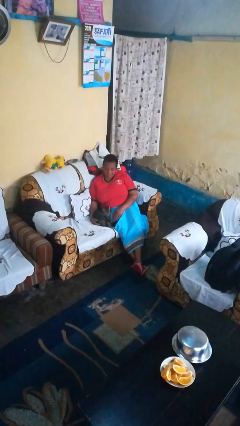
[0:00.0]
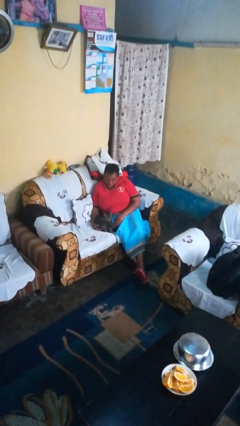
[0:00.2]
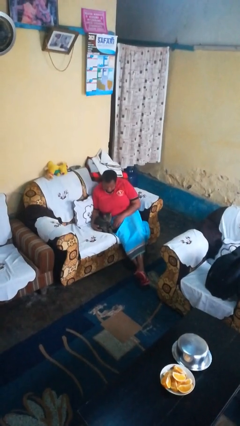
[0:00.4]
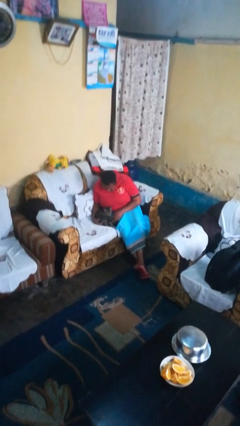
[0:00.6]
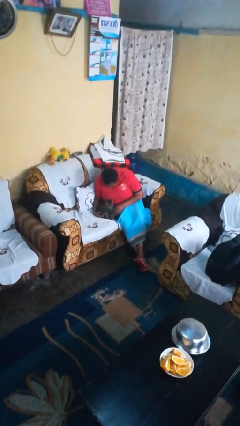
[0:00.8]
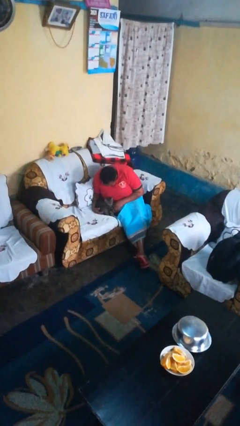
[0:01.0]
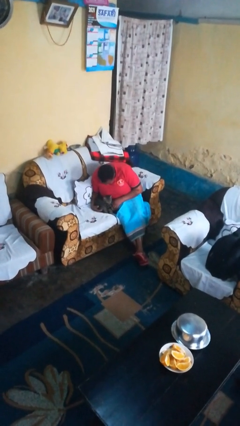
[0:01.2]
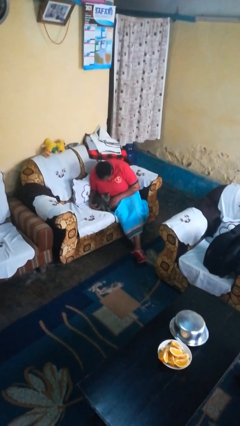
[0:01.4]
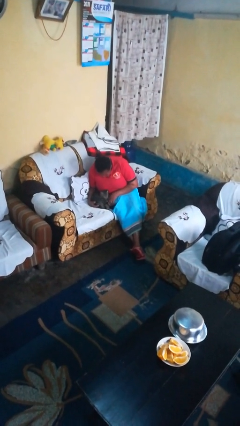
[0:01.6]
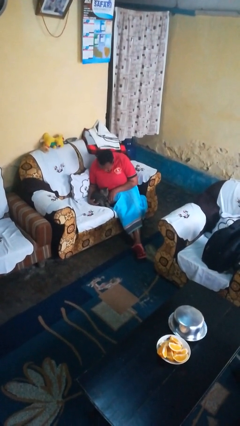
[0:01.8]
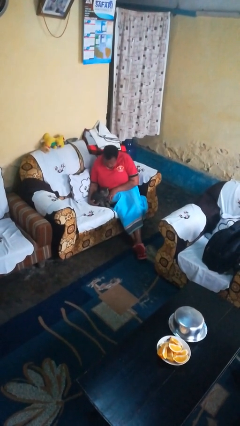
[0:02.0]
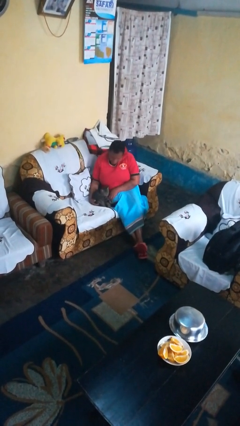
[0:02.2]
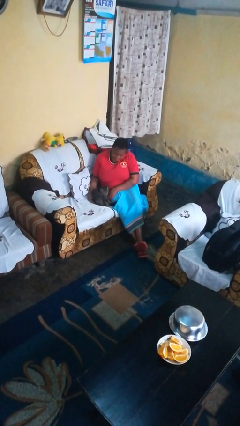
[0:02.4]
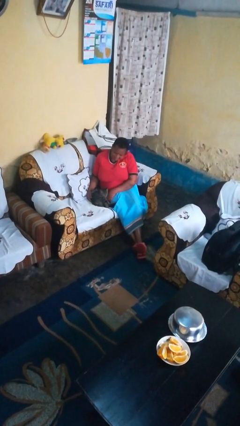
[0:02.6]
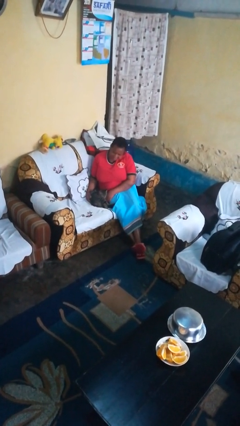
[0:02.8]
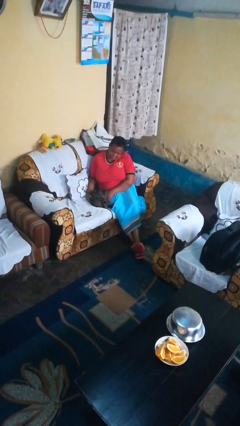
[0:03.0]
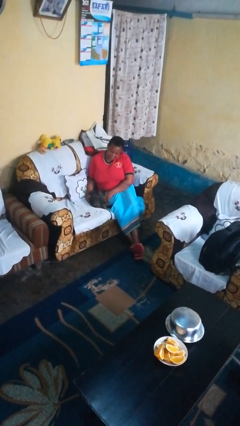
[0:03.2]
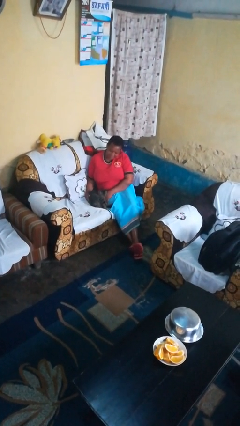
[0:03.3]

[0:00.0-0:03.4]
person hugs cat

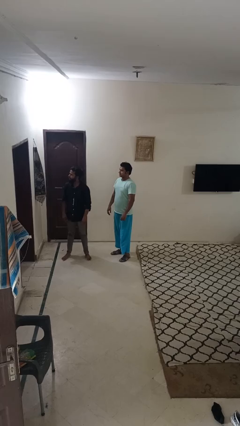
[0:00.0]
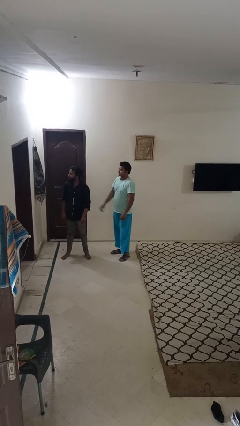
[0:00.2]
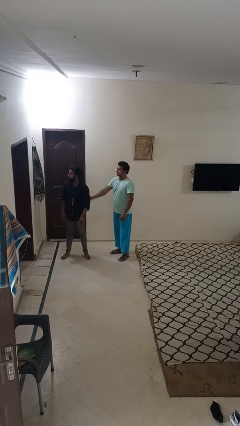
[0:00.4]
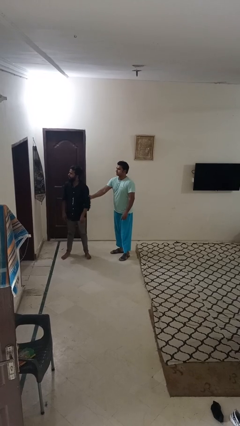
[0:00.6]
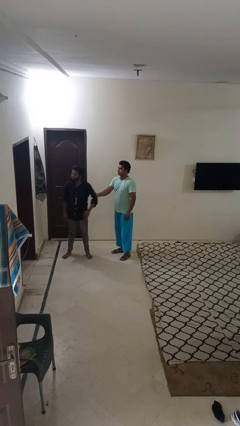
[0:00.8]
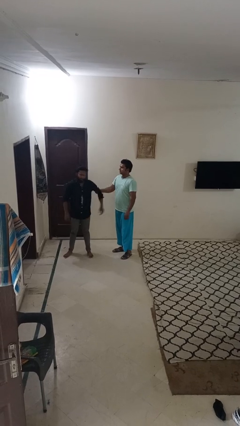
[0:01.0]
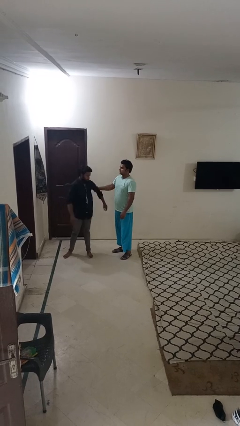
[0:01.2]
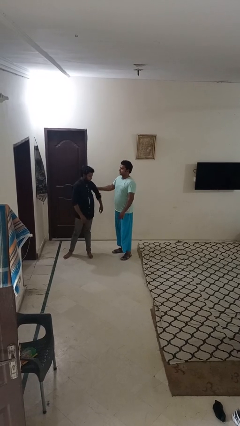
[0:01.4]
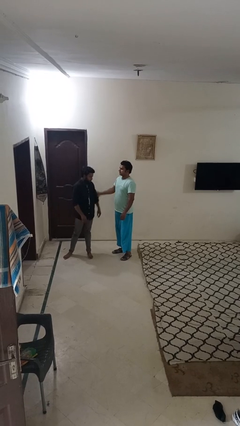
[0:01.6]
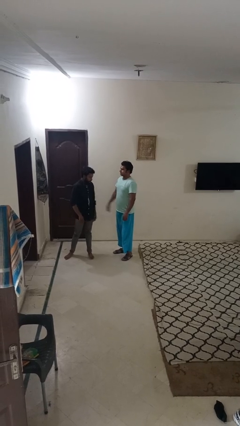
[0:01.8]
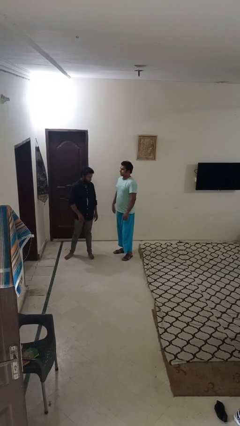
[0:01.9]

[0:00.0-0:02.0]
person grabs person by bicep

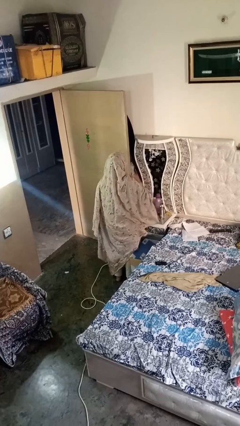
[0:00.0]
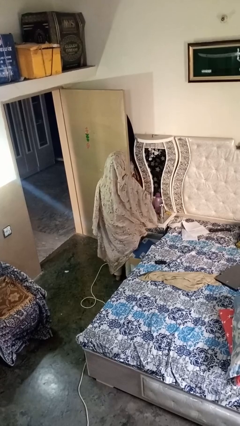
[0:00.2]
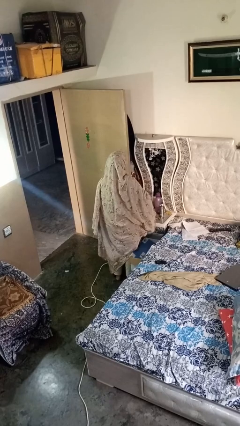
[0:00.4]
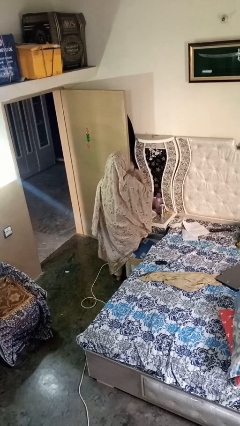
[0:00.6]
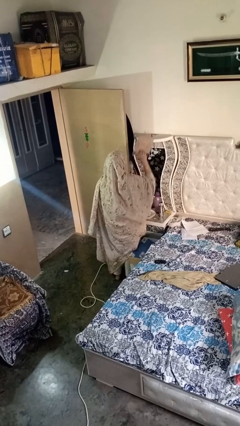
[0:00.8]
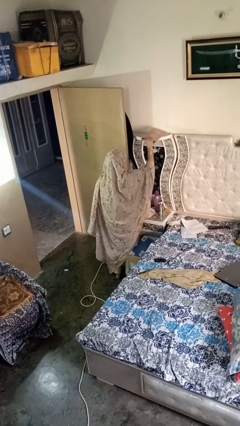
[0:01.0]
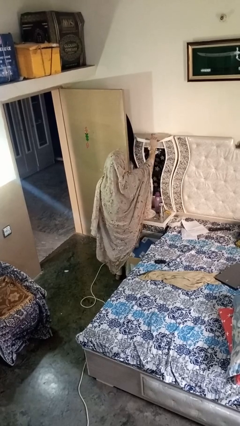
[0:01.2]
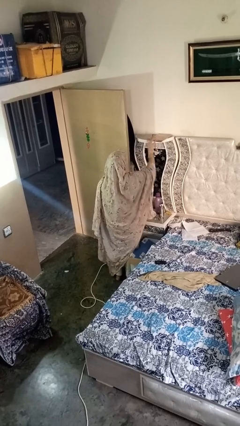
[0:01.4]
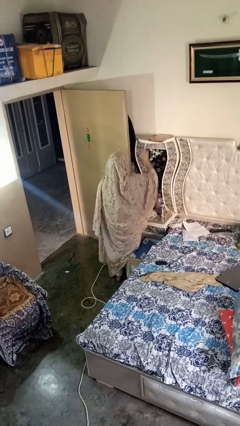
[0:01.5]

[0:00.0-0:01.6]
person puts down object on shelf

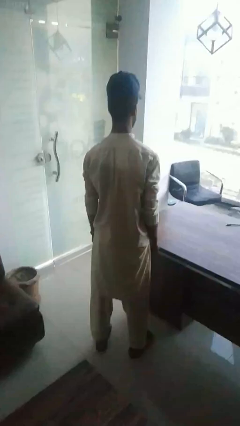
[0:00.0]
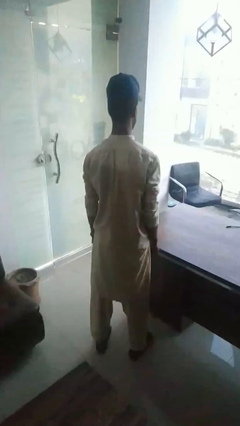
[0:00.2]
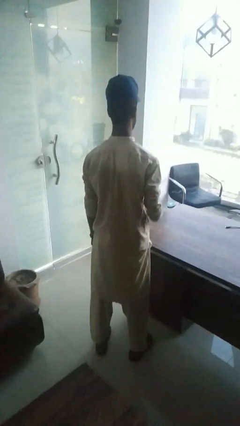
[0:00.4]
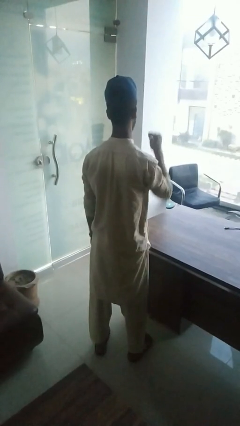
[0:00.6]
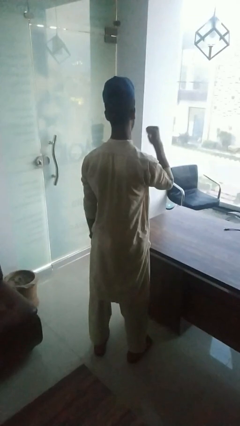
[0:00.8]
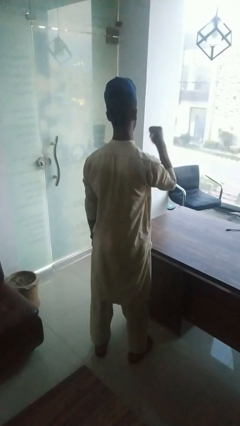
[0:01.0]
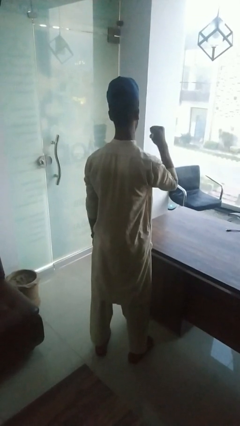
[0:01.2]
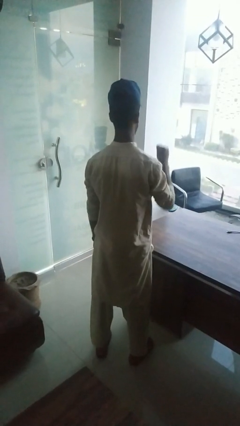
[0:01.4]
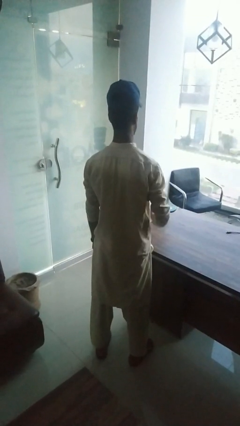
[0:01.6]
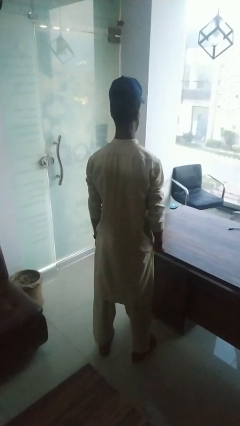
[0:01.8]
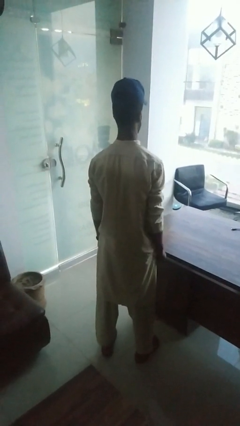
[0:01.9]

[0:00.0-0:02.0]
person gestures behind me

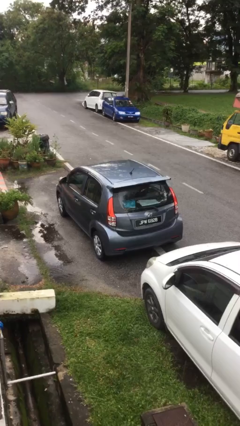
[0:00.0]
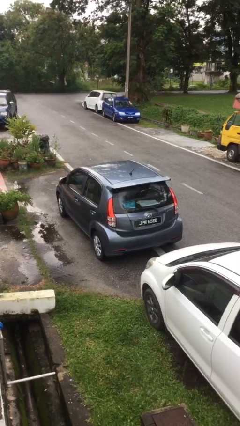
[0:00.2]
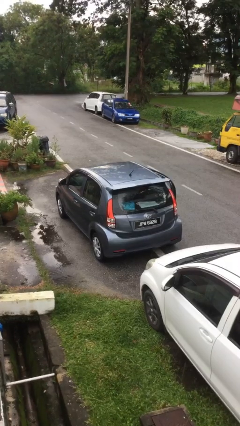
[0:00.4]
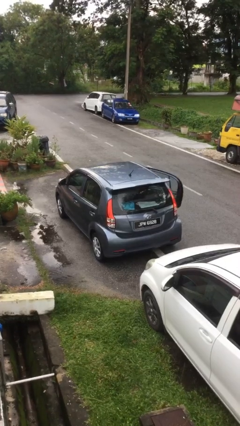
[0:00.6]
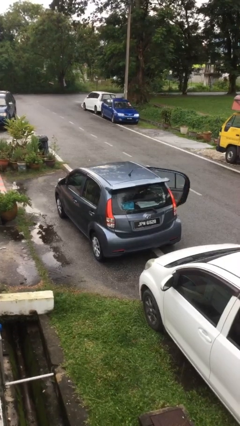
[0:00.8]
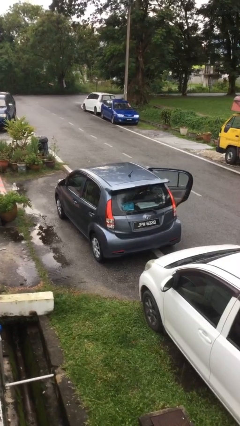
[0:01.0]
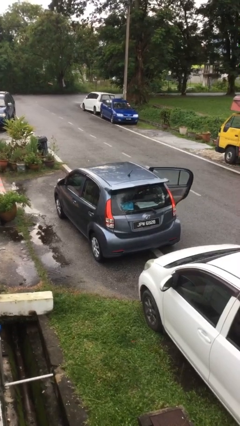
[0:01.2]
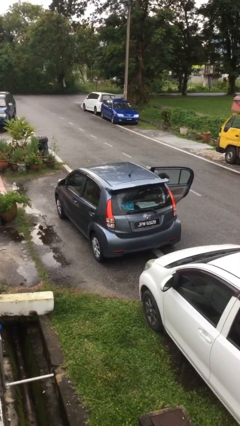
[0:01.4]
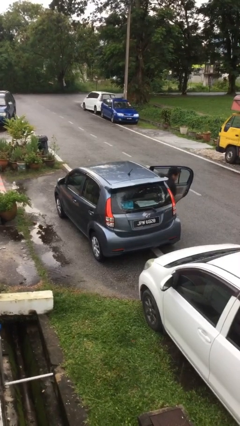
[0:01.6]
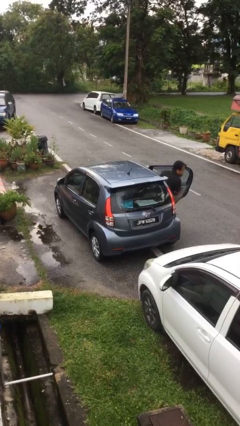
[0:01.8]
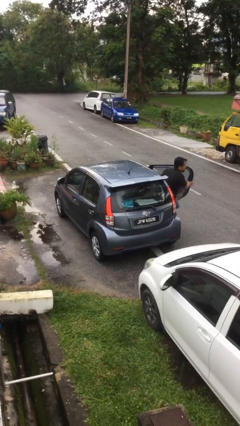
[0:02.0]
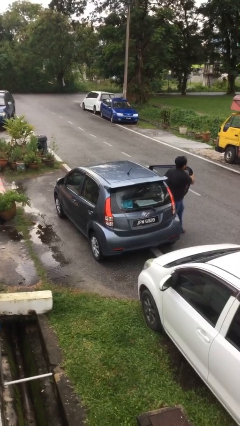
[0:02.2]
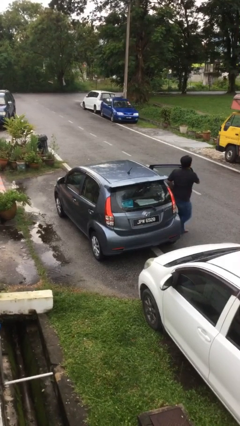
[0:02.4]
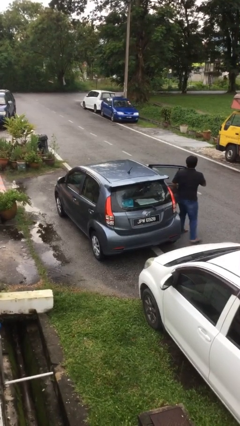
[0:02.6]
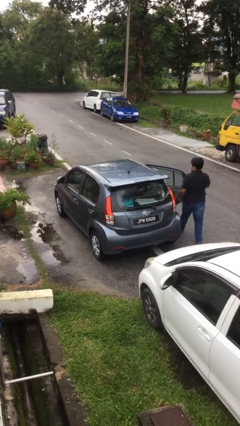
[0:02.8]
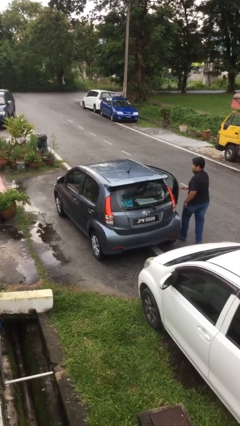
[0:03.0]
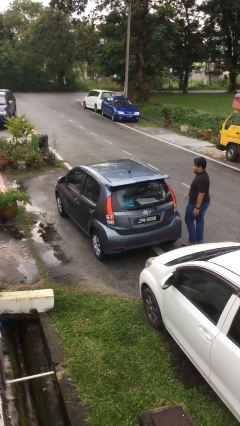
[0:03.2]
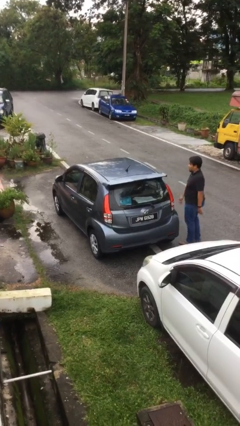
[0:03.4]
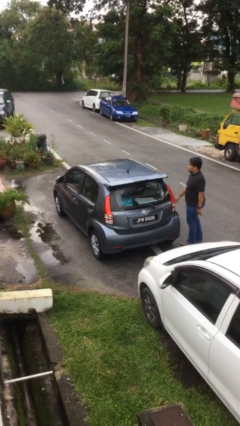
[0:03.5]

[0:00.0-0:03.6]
car drops off person

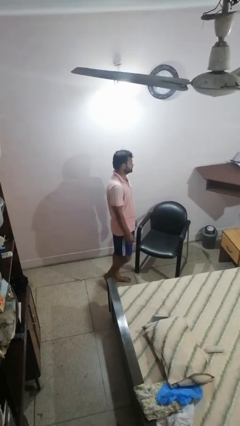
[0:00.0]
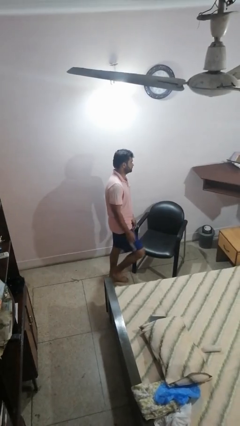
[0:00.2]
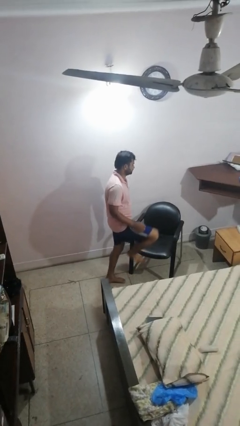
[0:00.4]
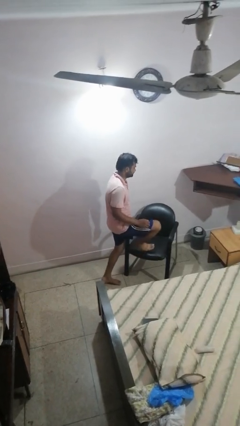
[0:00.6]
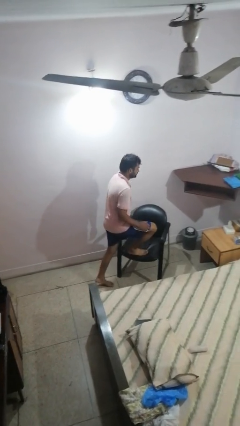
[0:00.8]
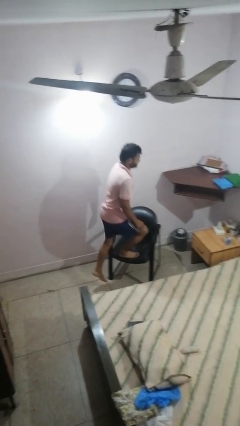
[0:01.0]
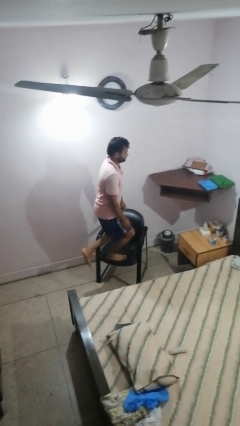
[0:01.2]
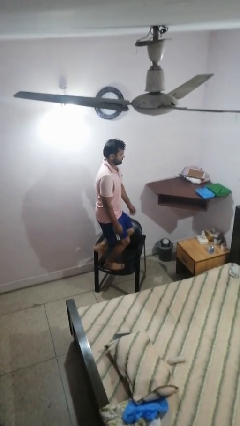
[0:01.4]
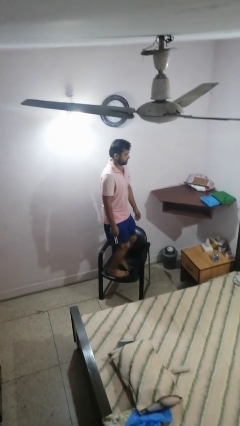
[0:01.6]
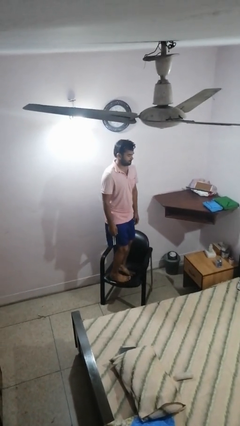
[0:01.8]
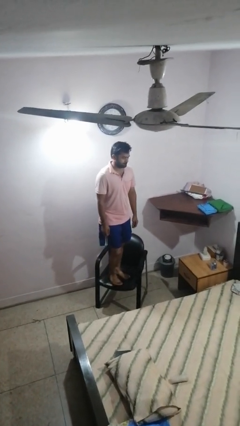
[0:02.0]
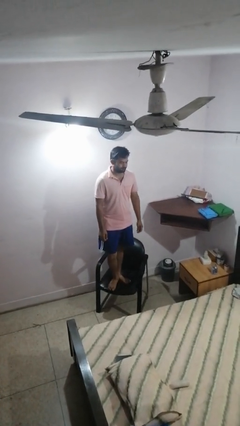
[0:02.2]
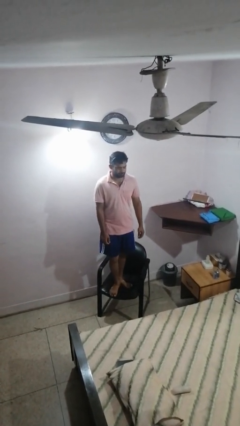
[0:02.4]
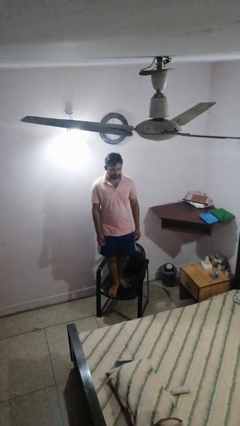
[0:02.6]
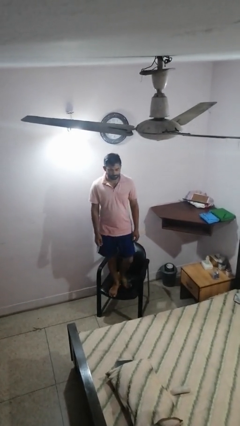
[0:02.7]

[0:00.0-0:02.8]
person climbs on chair

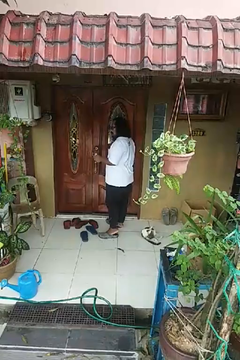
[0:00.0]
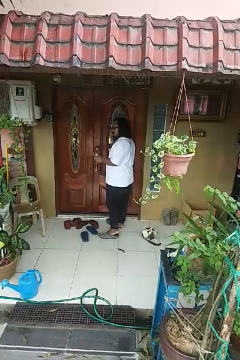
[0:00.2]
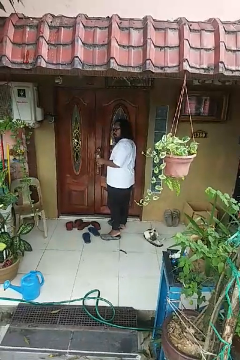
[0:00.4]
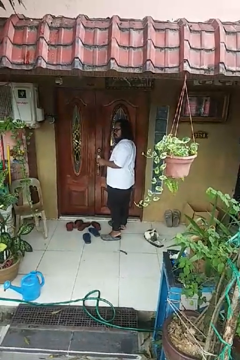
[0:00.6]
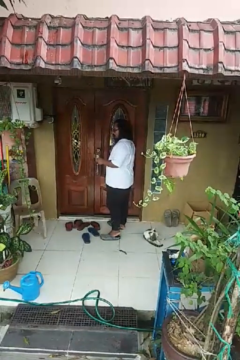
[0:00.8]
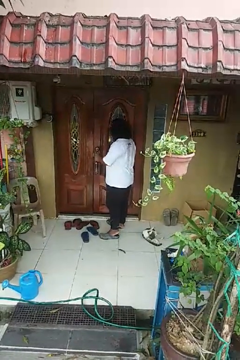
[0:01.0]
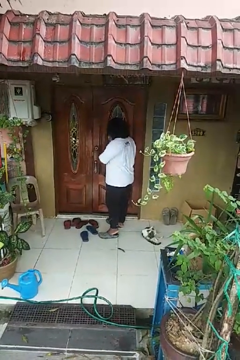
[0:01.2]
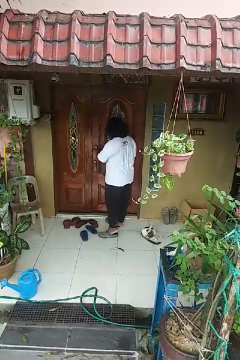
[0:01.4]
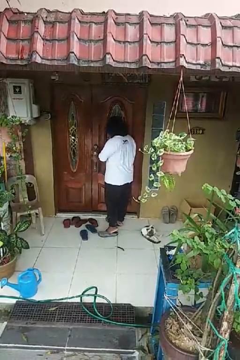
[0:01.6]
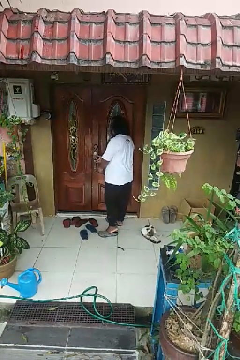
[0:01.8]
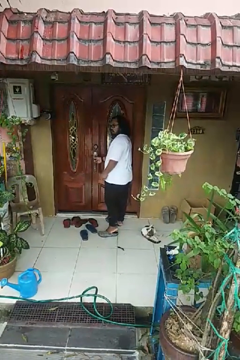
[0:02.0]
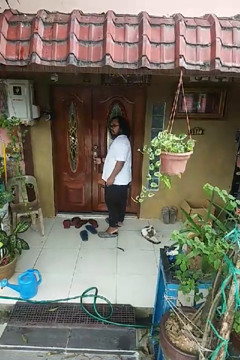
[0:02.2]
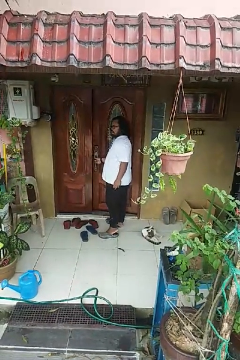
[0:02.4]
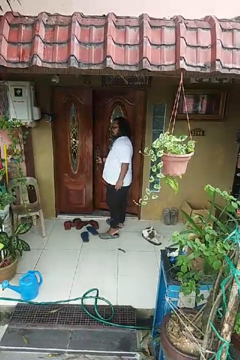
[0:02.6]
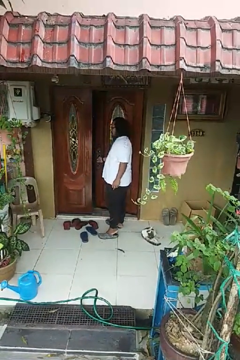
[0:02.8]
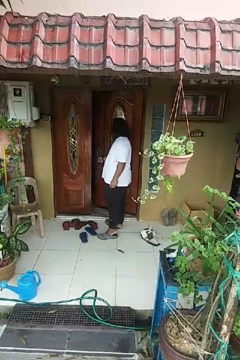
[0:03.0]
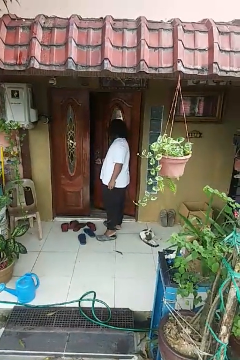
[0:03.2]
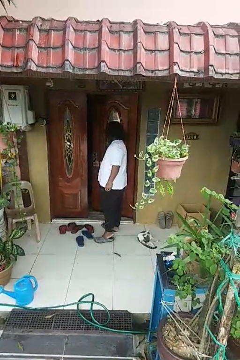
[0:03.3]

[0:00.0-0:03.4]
person opens facility door
